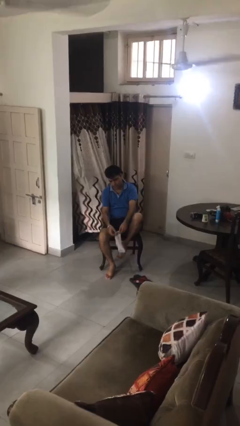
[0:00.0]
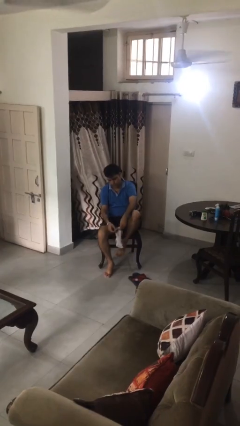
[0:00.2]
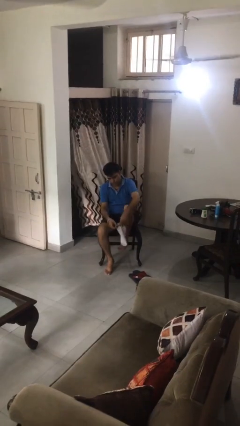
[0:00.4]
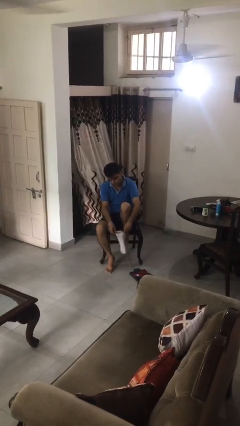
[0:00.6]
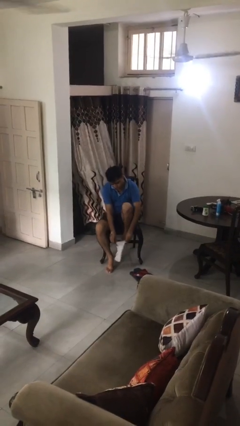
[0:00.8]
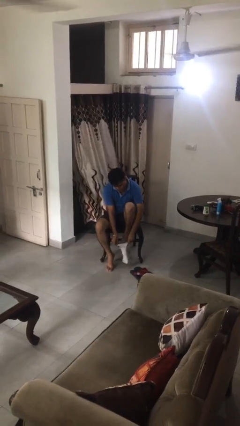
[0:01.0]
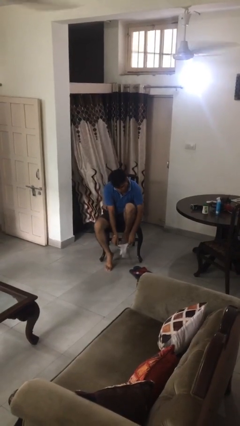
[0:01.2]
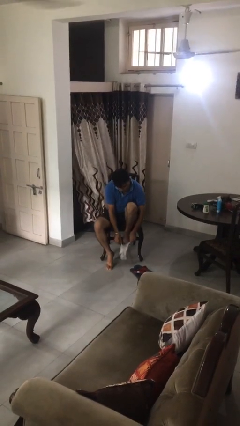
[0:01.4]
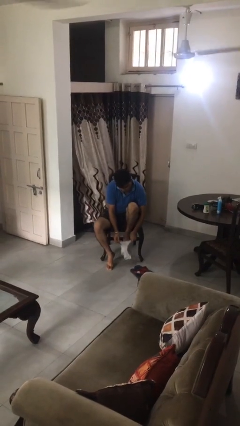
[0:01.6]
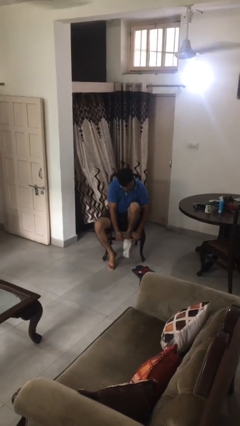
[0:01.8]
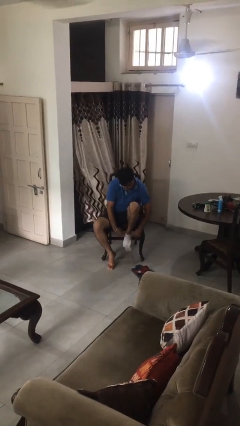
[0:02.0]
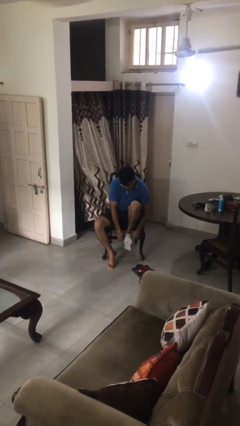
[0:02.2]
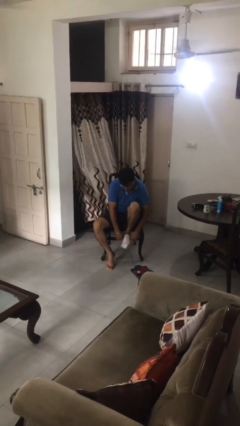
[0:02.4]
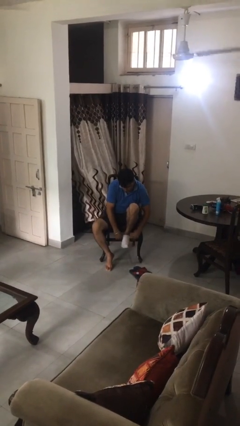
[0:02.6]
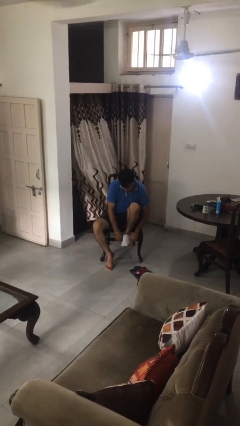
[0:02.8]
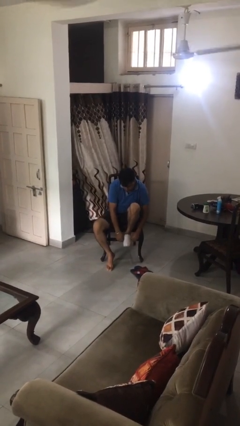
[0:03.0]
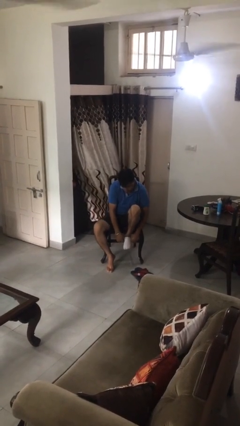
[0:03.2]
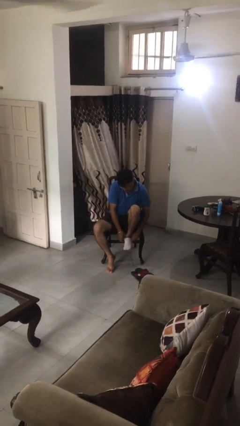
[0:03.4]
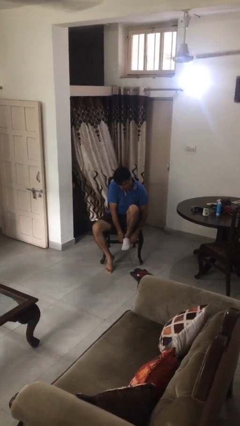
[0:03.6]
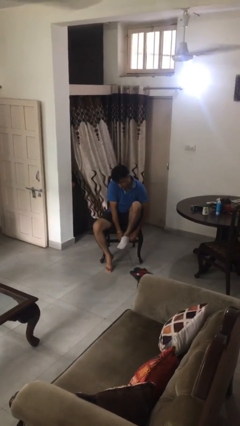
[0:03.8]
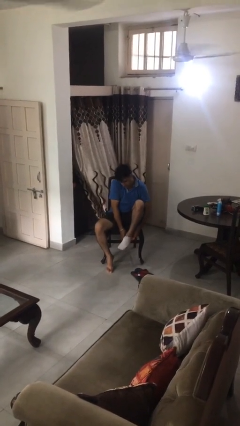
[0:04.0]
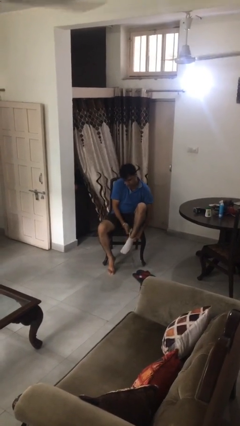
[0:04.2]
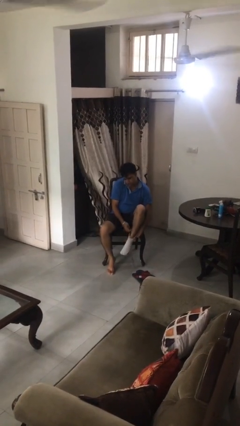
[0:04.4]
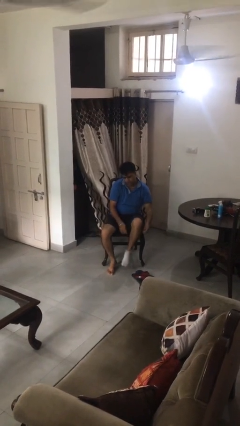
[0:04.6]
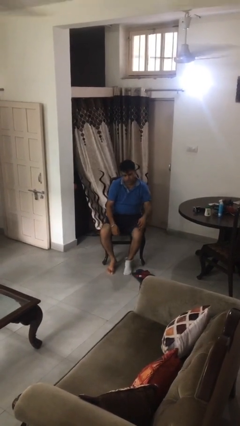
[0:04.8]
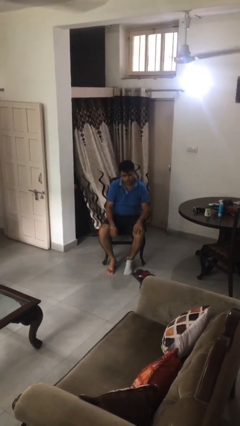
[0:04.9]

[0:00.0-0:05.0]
person puts on socks

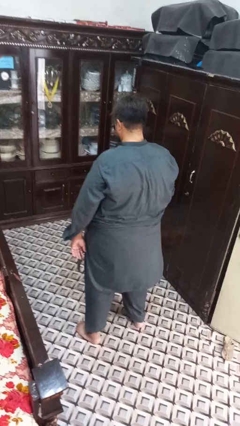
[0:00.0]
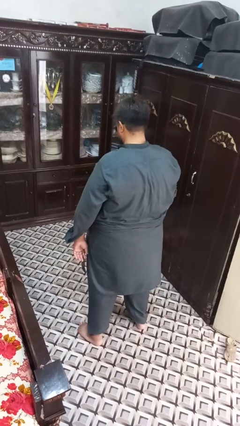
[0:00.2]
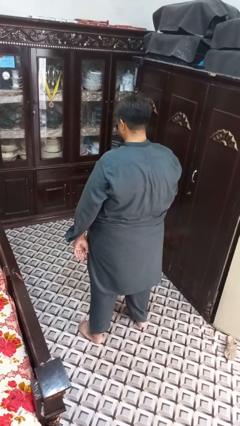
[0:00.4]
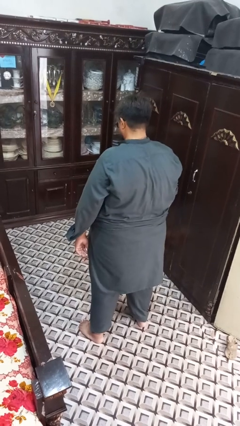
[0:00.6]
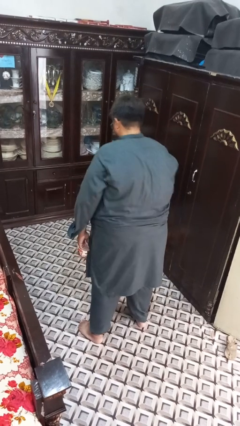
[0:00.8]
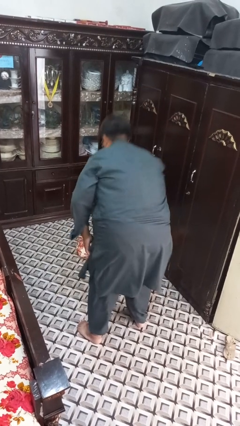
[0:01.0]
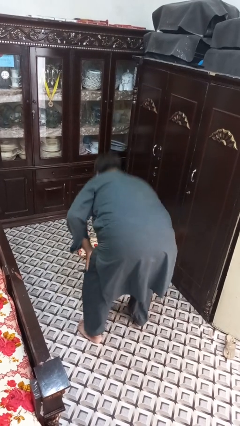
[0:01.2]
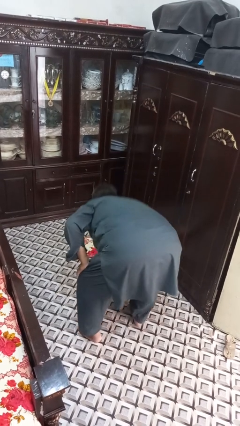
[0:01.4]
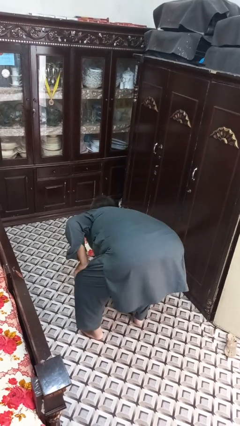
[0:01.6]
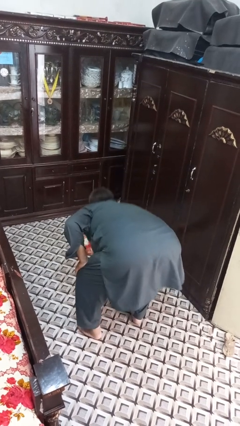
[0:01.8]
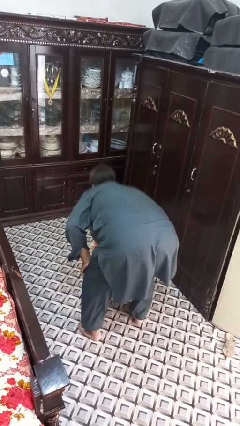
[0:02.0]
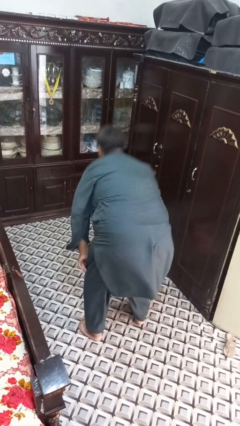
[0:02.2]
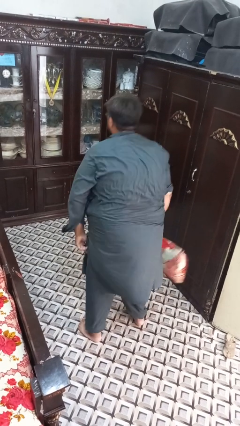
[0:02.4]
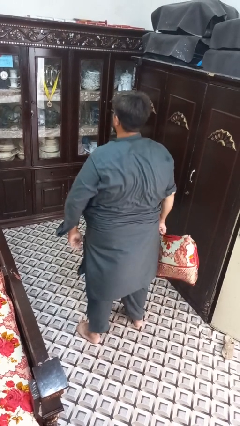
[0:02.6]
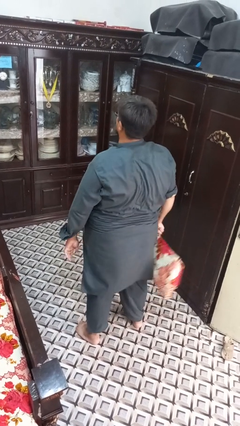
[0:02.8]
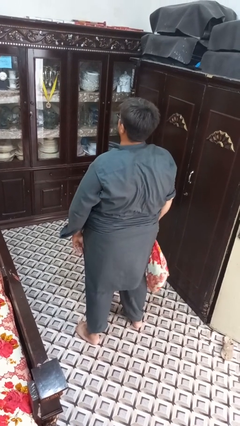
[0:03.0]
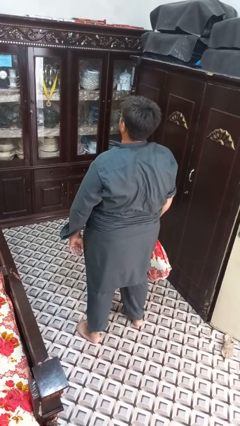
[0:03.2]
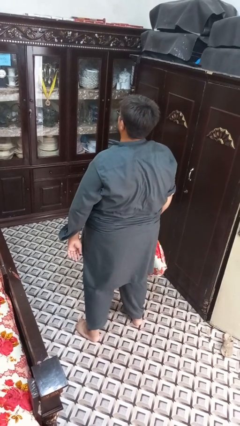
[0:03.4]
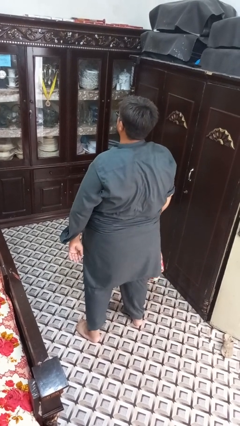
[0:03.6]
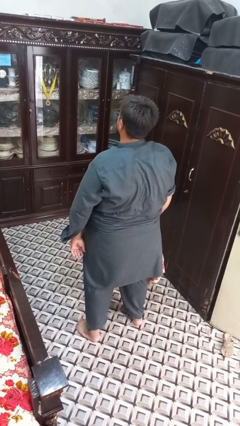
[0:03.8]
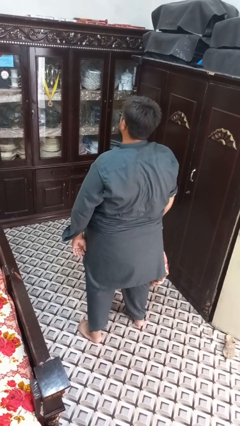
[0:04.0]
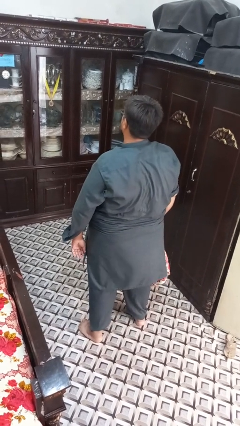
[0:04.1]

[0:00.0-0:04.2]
person picks up object from floor

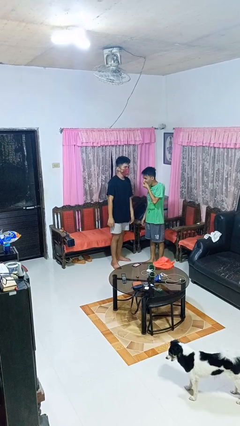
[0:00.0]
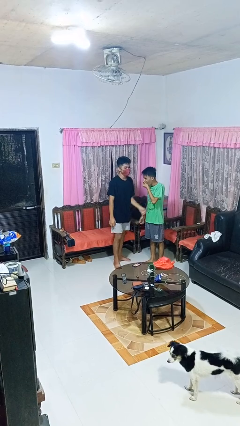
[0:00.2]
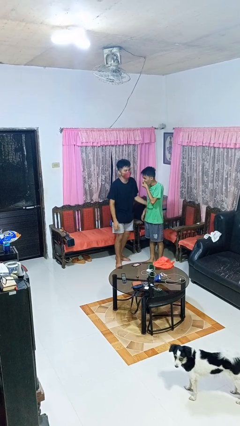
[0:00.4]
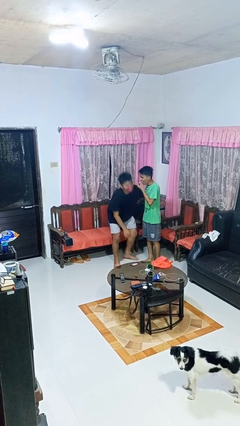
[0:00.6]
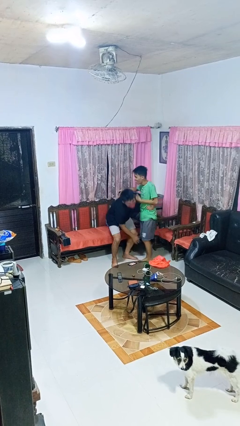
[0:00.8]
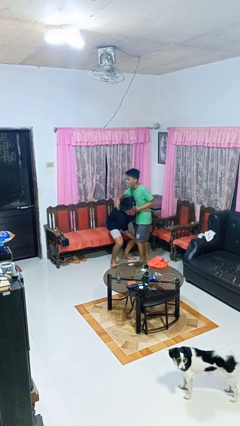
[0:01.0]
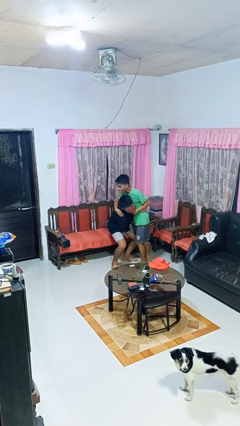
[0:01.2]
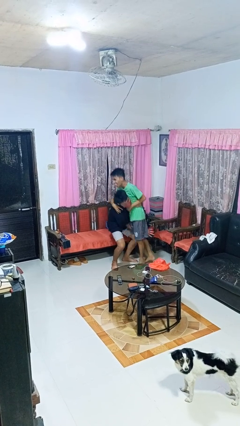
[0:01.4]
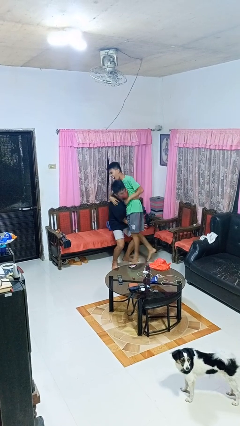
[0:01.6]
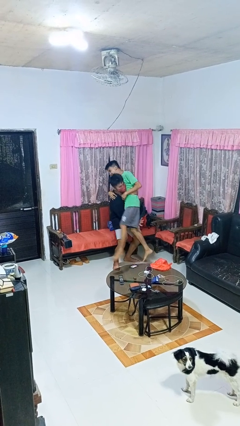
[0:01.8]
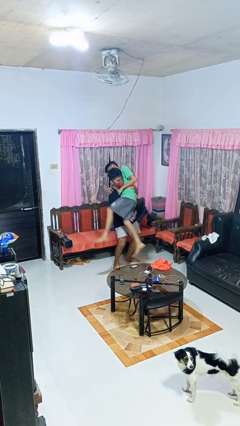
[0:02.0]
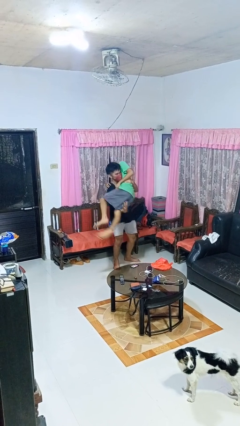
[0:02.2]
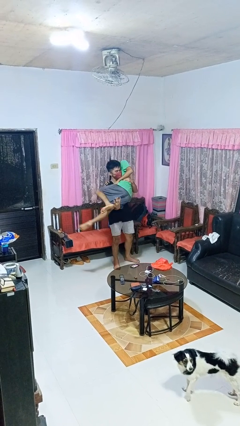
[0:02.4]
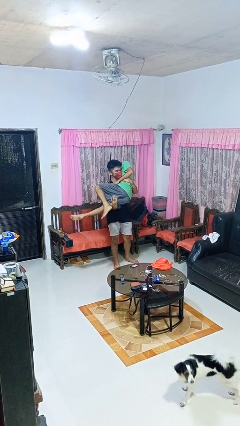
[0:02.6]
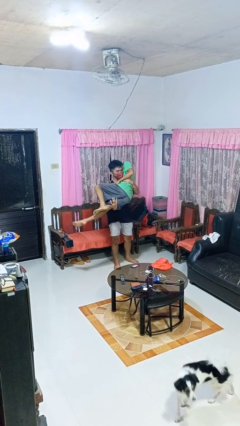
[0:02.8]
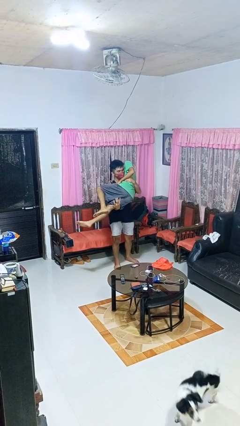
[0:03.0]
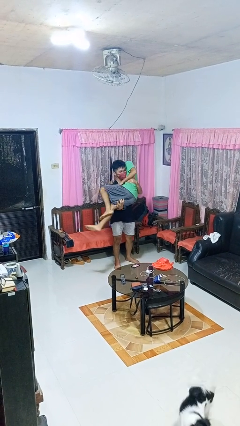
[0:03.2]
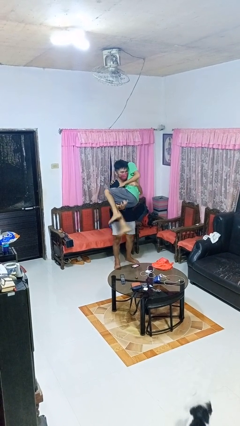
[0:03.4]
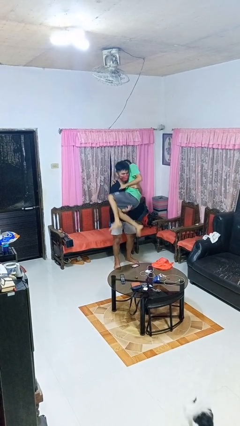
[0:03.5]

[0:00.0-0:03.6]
person picks up person

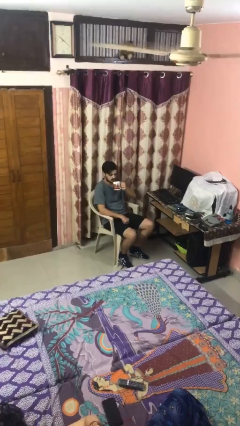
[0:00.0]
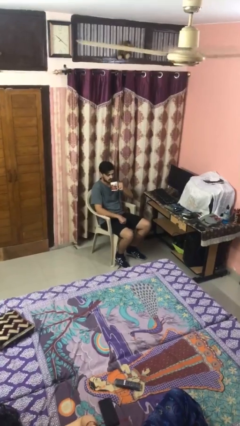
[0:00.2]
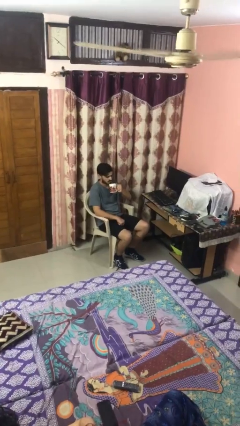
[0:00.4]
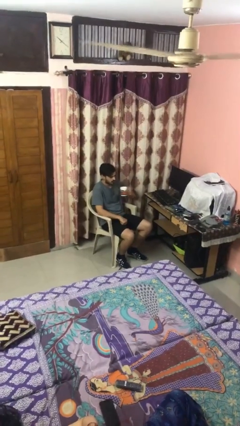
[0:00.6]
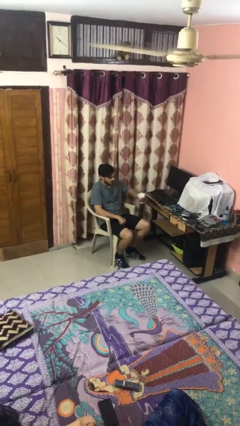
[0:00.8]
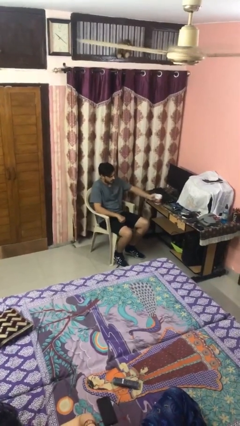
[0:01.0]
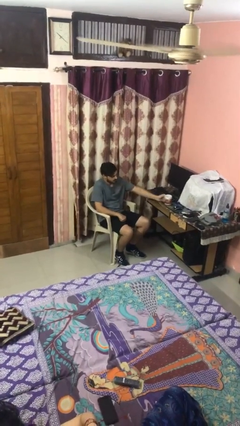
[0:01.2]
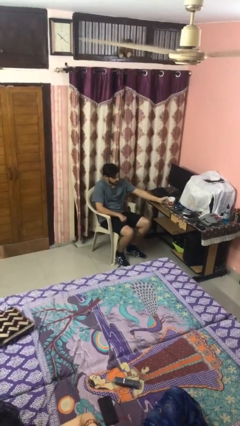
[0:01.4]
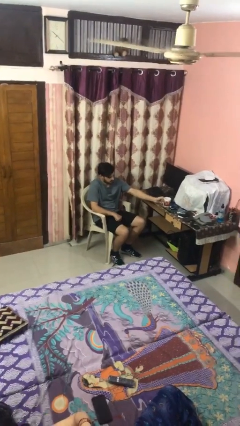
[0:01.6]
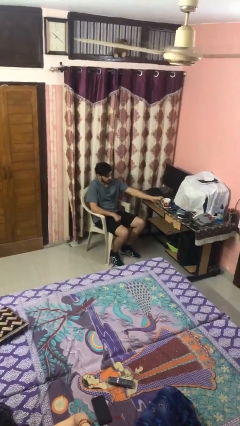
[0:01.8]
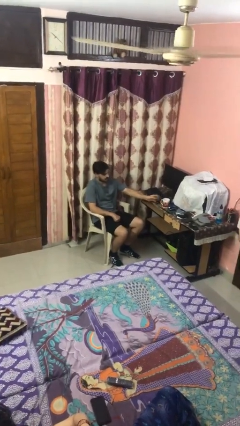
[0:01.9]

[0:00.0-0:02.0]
person puts down object on table

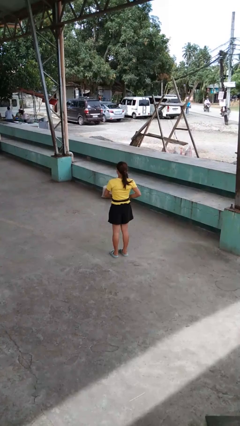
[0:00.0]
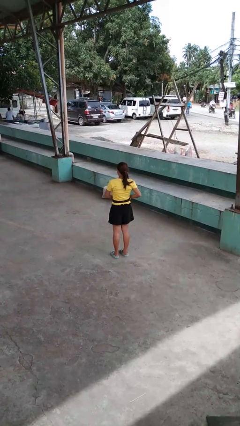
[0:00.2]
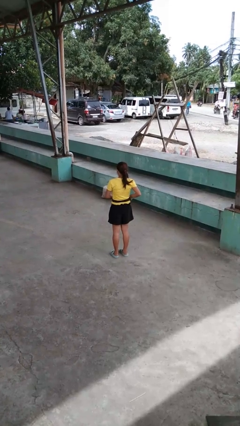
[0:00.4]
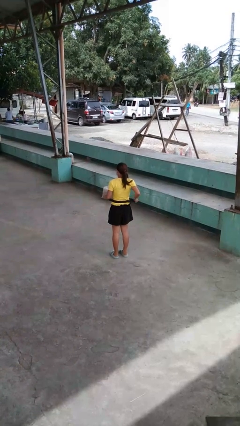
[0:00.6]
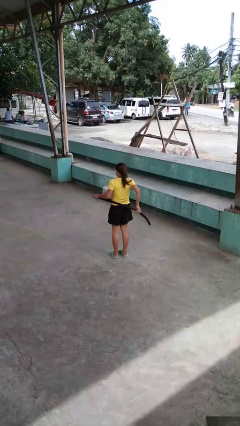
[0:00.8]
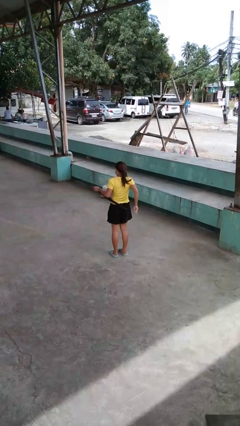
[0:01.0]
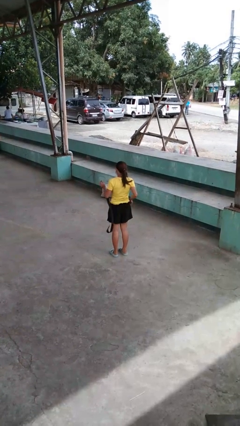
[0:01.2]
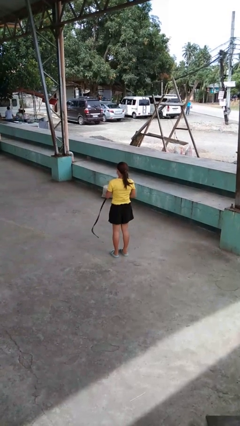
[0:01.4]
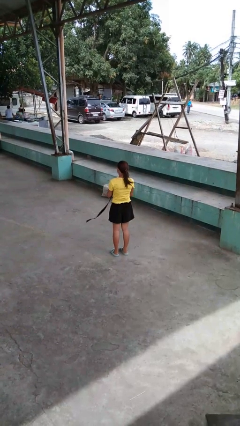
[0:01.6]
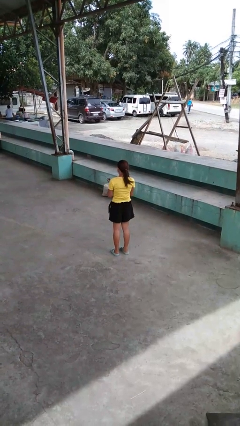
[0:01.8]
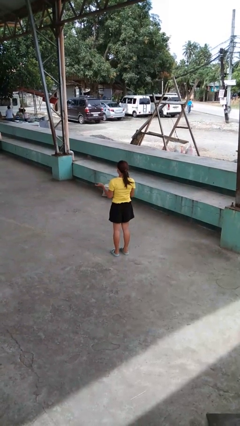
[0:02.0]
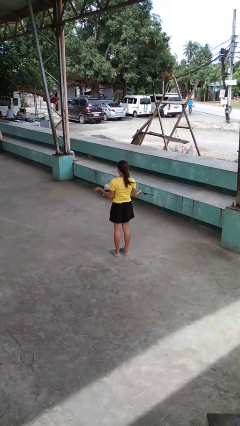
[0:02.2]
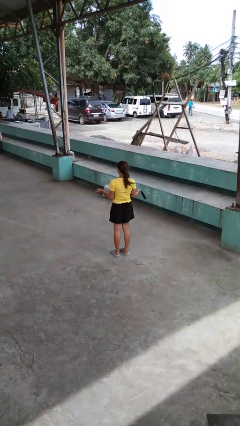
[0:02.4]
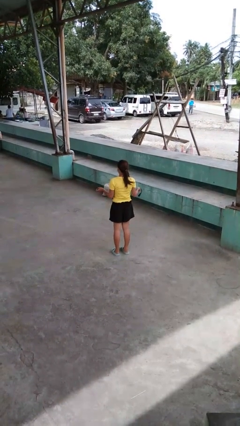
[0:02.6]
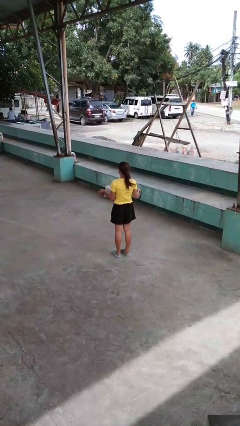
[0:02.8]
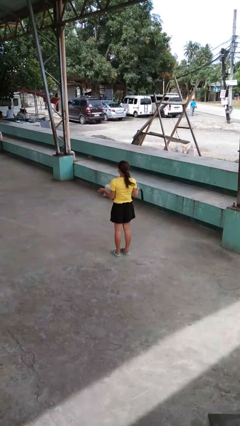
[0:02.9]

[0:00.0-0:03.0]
person takes off belt
